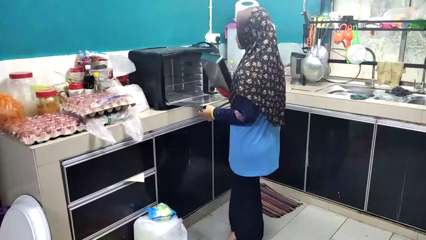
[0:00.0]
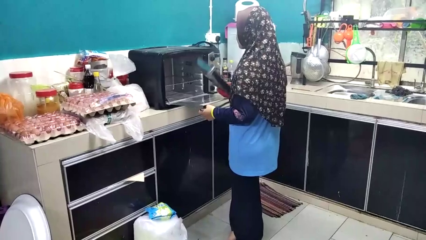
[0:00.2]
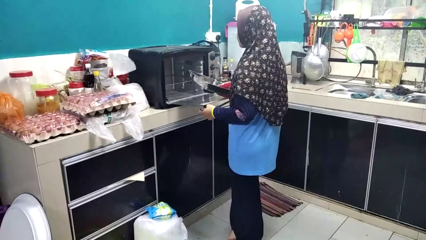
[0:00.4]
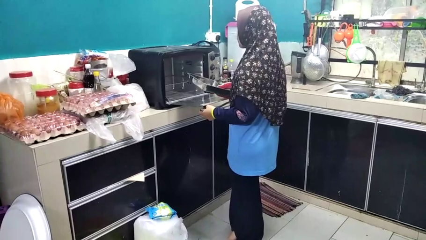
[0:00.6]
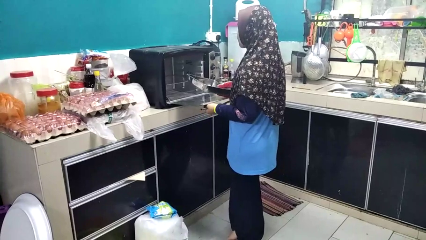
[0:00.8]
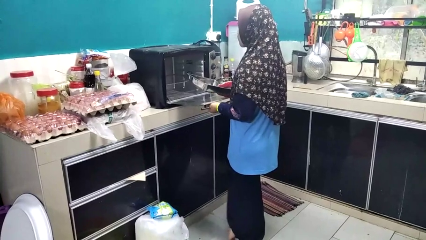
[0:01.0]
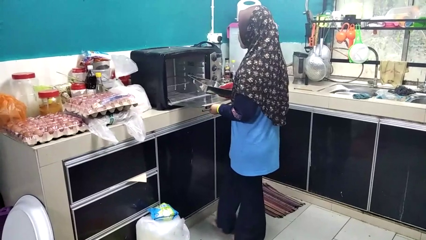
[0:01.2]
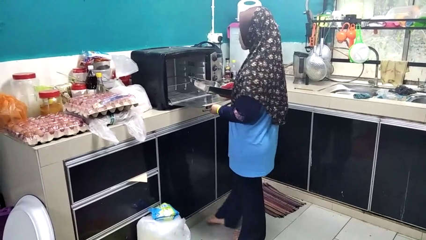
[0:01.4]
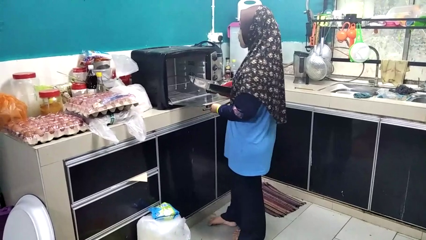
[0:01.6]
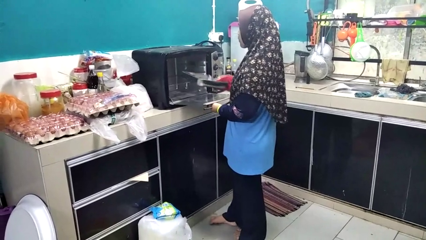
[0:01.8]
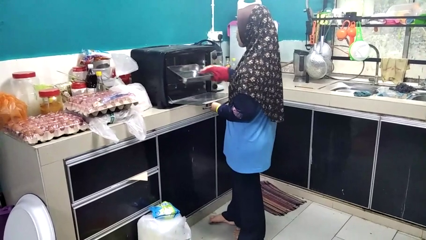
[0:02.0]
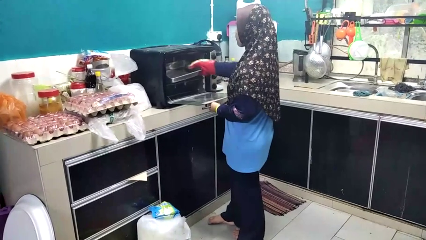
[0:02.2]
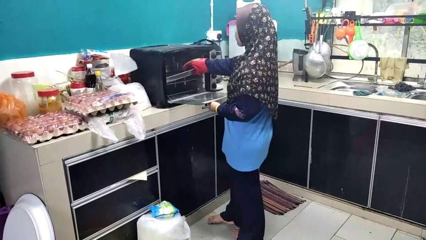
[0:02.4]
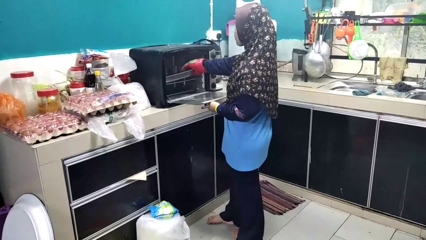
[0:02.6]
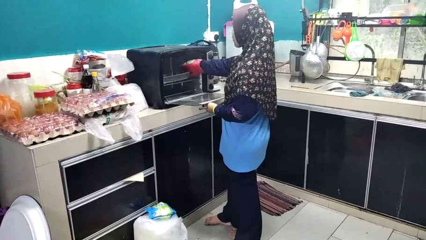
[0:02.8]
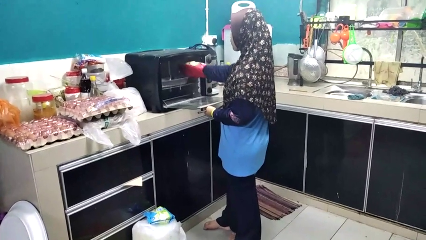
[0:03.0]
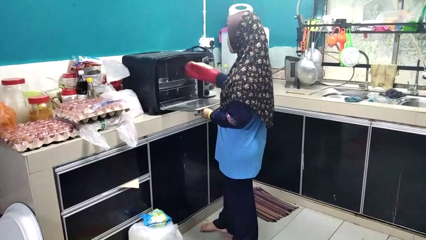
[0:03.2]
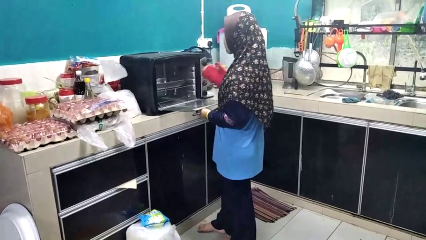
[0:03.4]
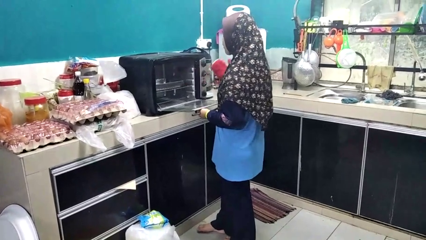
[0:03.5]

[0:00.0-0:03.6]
person puts object into oven

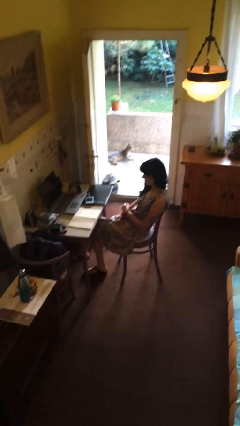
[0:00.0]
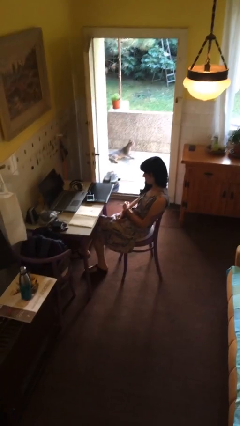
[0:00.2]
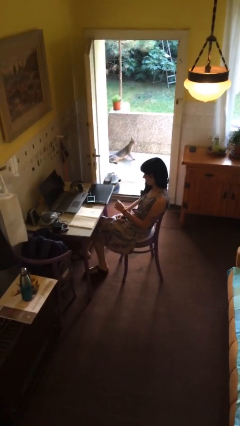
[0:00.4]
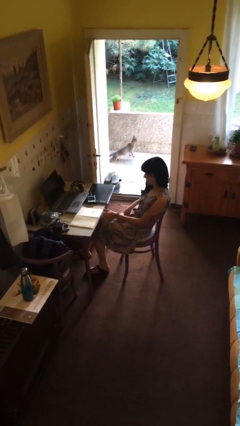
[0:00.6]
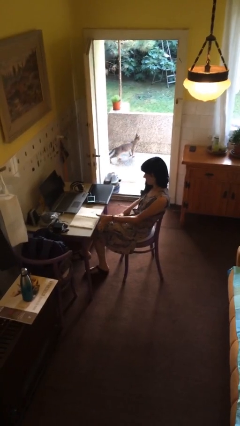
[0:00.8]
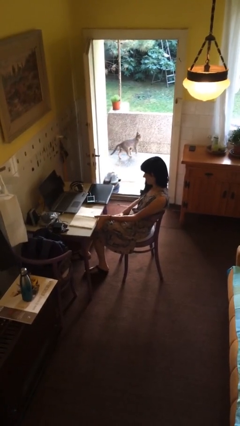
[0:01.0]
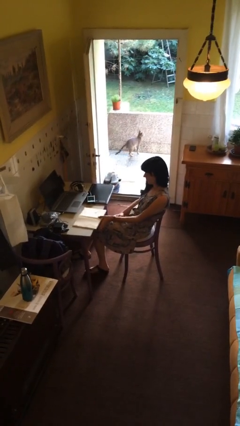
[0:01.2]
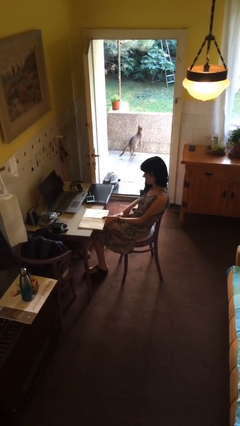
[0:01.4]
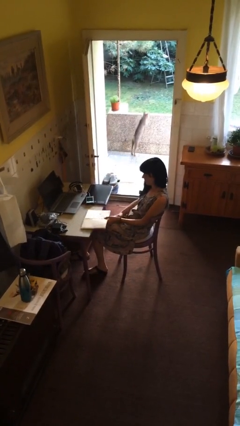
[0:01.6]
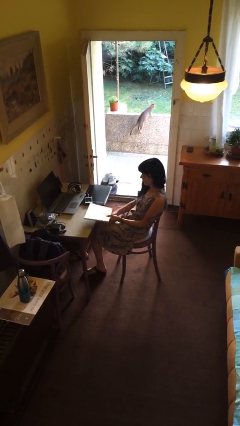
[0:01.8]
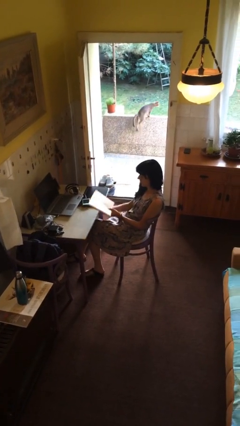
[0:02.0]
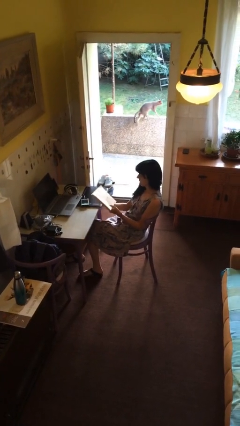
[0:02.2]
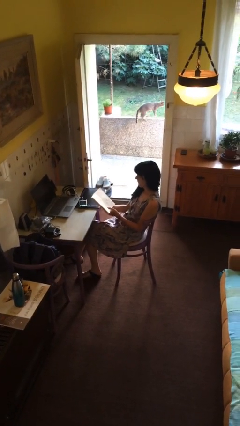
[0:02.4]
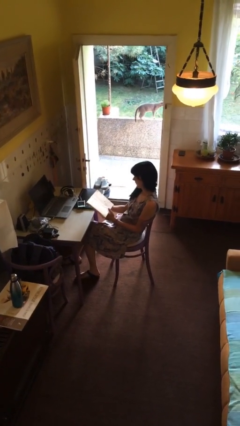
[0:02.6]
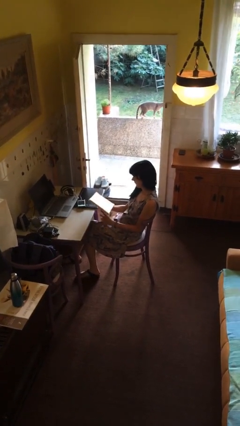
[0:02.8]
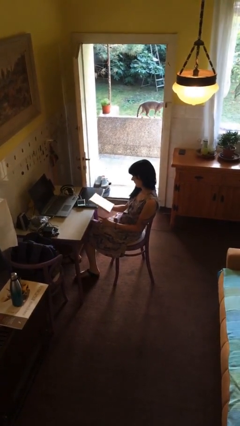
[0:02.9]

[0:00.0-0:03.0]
person picks up object from table

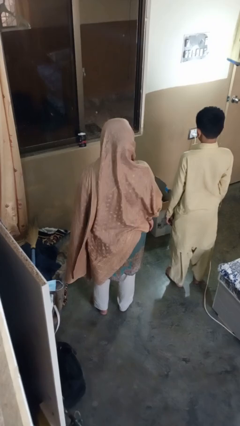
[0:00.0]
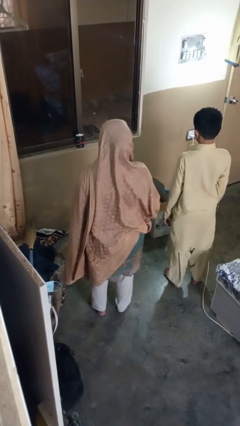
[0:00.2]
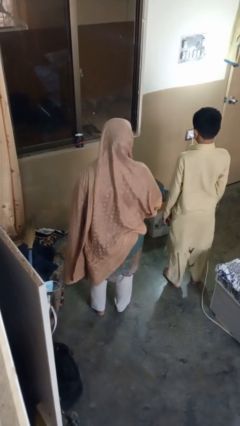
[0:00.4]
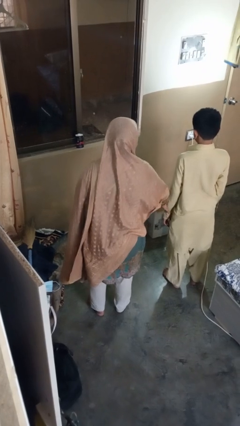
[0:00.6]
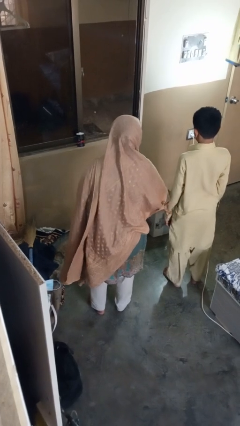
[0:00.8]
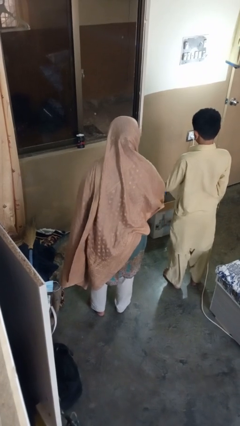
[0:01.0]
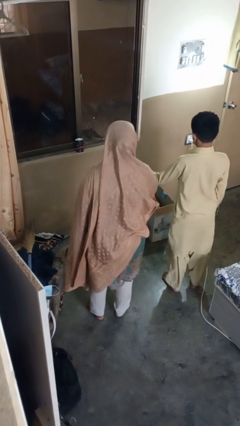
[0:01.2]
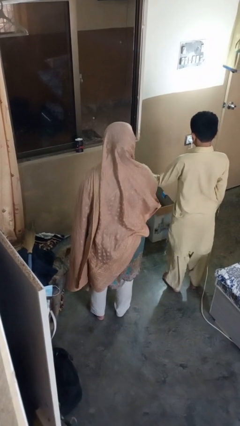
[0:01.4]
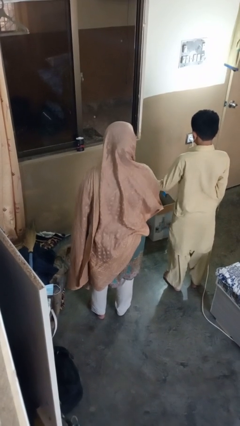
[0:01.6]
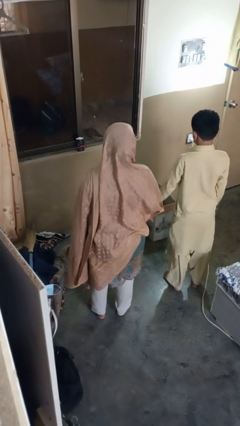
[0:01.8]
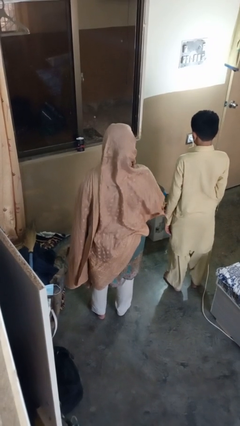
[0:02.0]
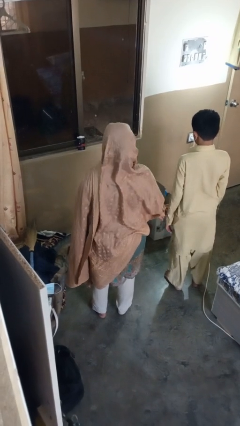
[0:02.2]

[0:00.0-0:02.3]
person grabs person by forearm

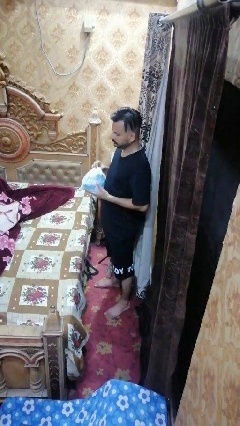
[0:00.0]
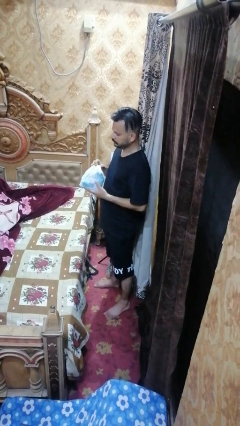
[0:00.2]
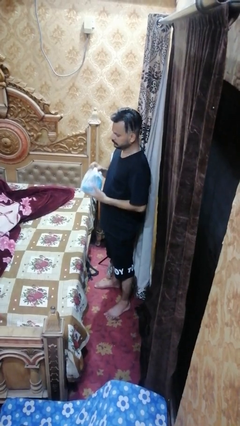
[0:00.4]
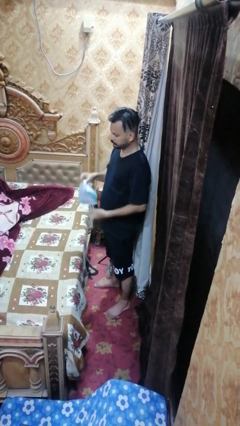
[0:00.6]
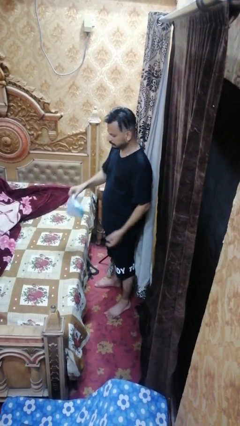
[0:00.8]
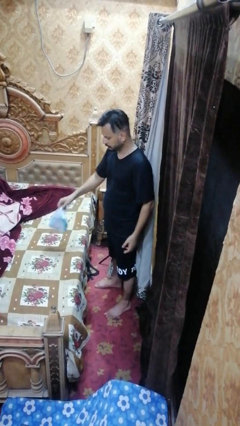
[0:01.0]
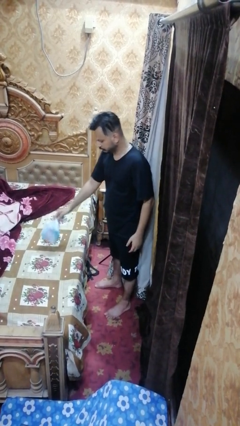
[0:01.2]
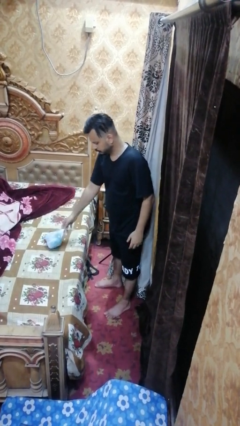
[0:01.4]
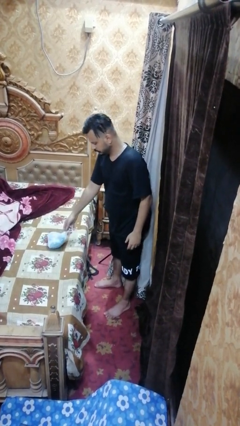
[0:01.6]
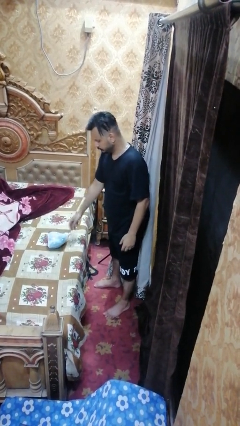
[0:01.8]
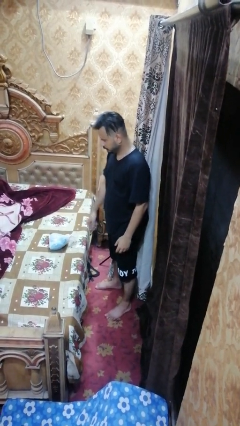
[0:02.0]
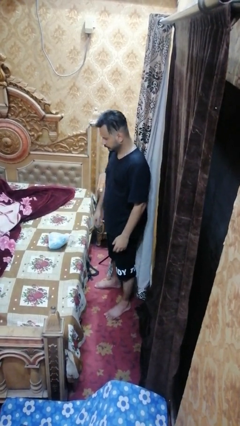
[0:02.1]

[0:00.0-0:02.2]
person puts down object on bed

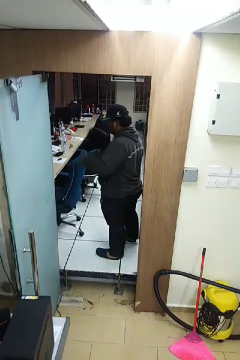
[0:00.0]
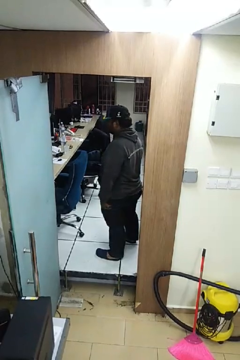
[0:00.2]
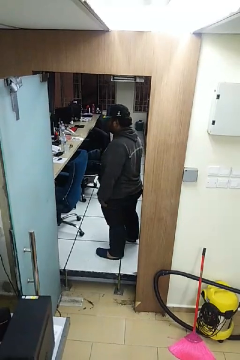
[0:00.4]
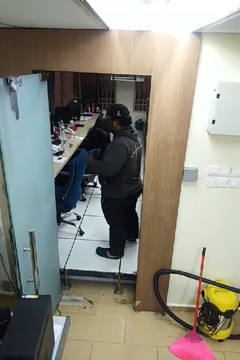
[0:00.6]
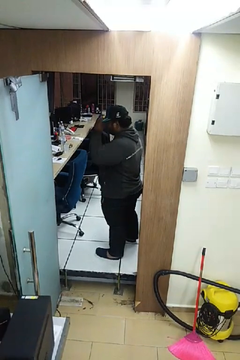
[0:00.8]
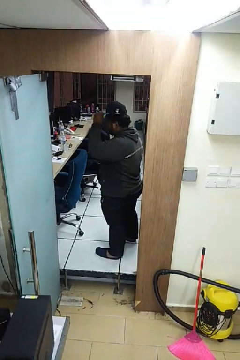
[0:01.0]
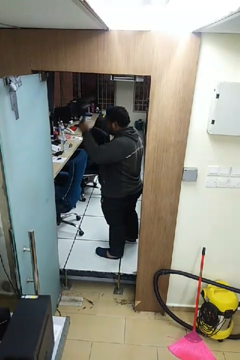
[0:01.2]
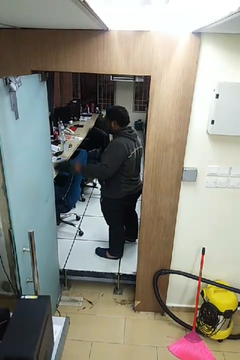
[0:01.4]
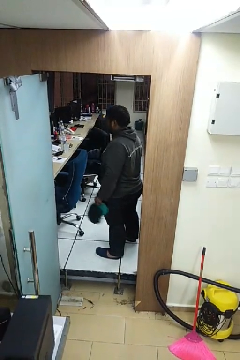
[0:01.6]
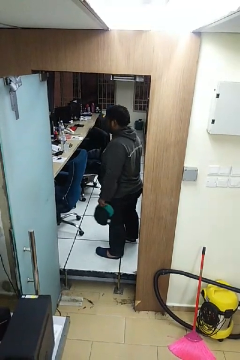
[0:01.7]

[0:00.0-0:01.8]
person takes off hat

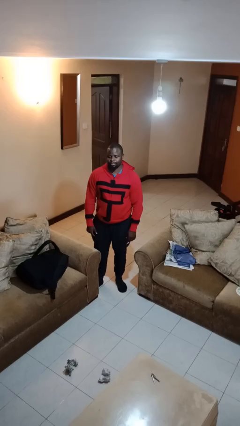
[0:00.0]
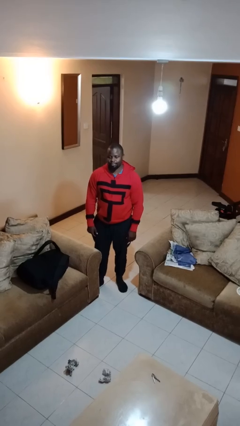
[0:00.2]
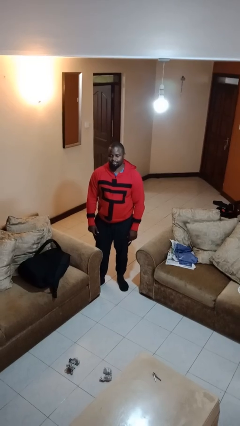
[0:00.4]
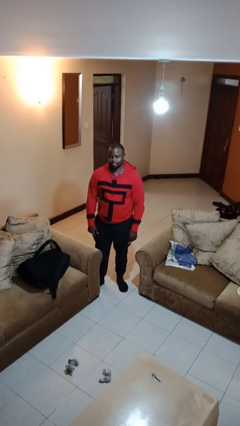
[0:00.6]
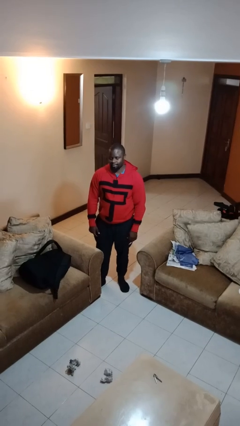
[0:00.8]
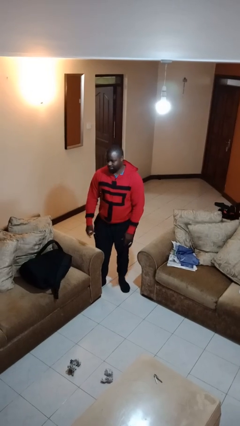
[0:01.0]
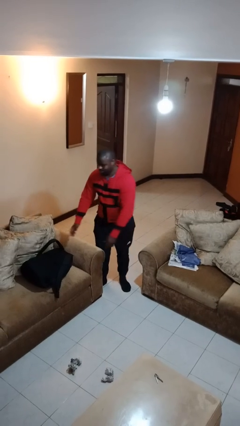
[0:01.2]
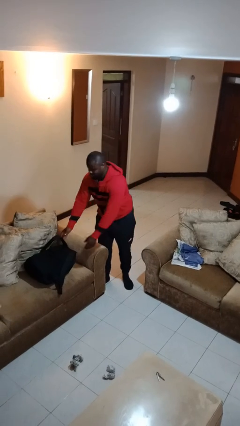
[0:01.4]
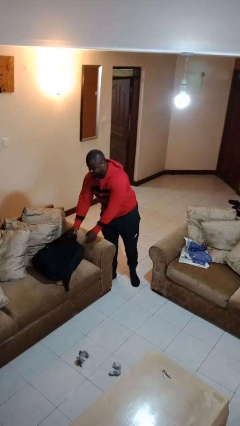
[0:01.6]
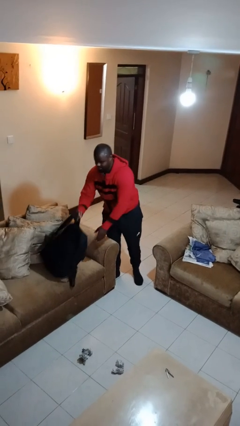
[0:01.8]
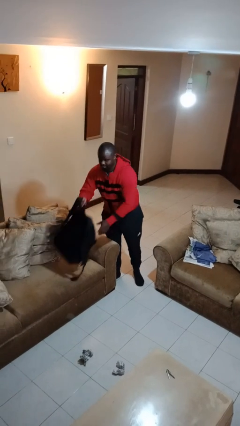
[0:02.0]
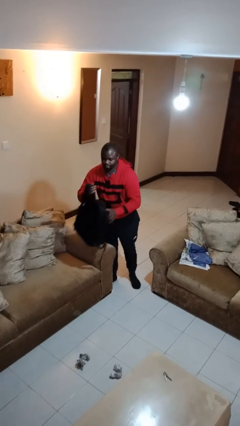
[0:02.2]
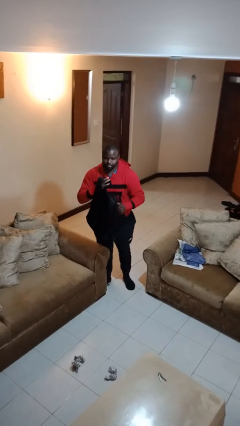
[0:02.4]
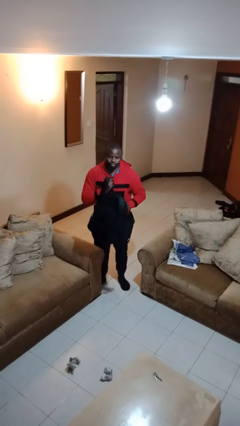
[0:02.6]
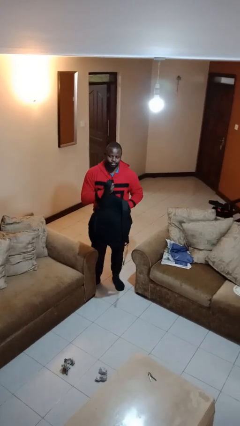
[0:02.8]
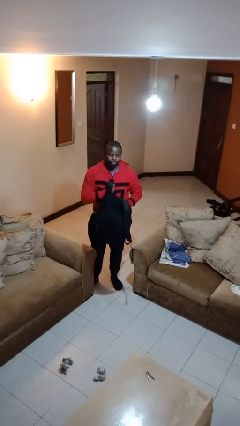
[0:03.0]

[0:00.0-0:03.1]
person picks up object from couch

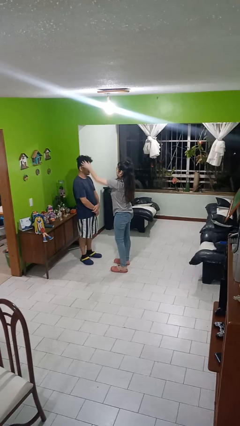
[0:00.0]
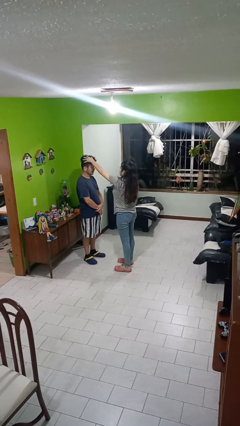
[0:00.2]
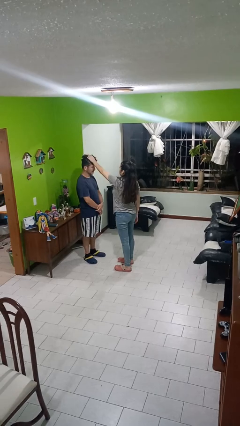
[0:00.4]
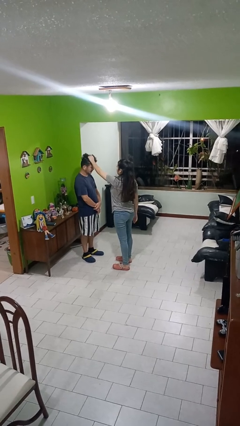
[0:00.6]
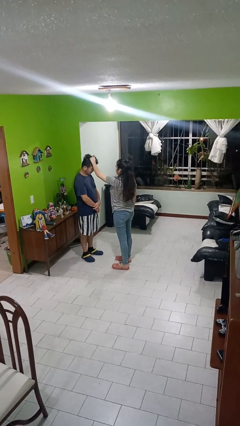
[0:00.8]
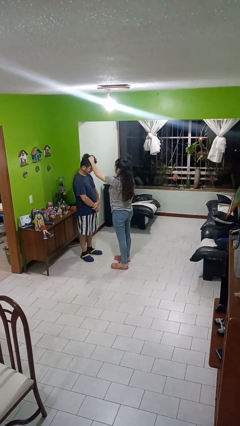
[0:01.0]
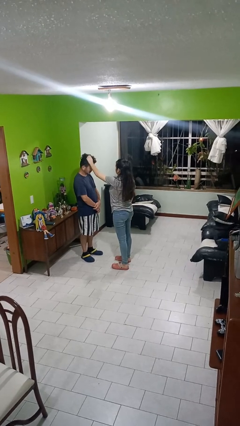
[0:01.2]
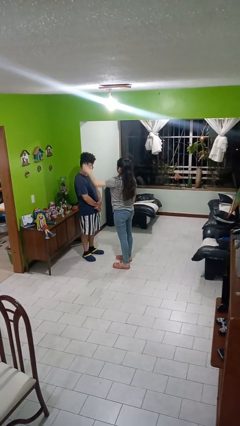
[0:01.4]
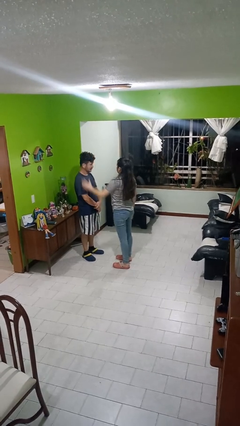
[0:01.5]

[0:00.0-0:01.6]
person grabs person by hair
